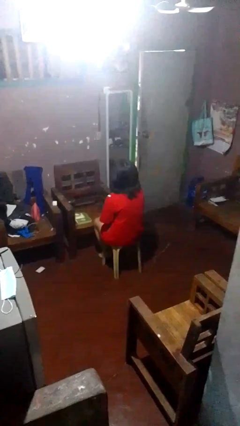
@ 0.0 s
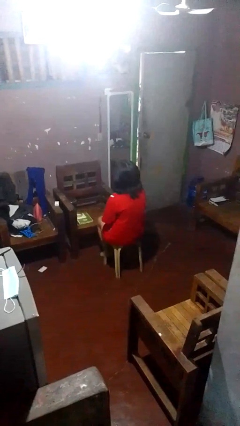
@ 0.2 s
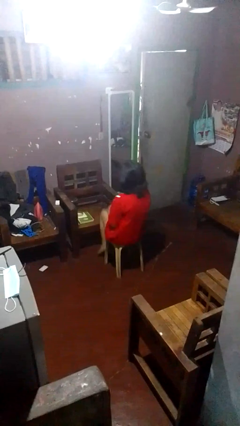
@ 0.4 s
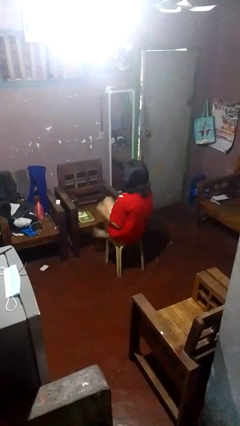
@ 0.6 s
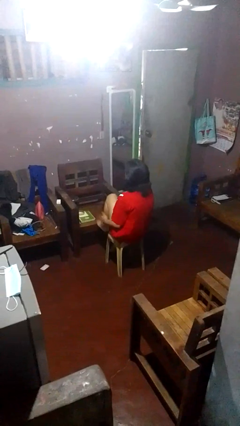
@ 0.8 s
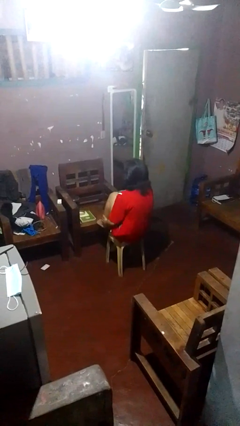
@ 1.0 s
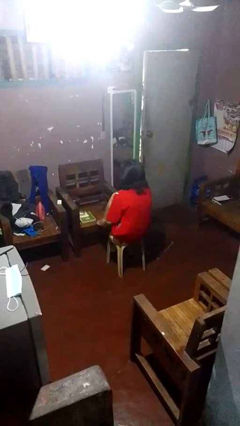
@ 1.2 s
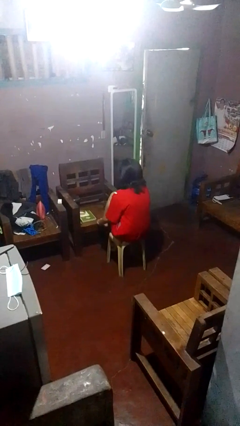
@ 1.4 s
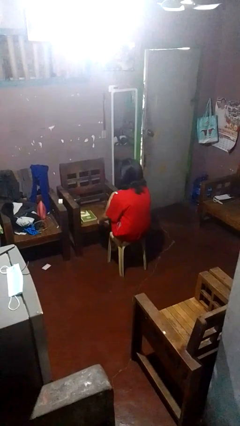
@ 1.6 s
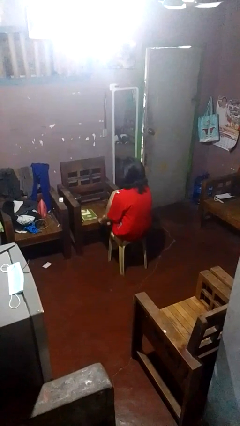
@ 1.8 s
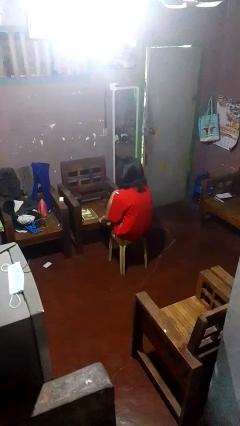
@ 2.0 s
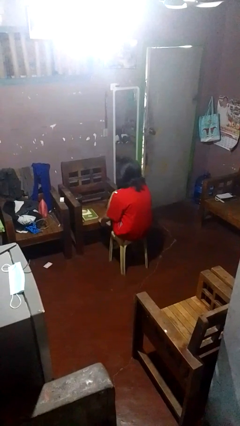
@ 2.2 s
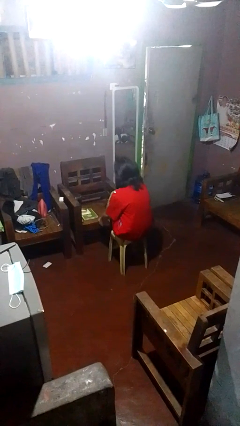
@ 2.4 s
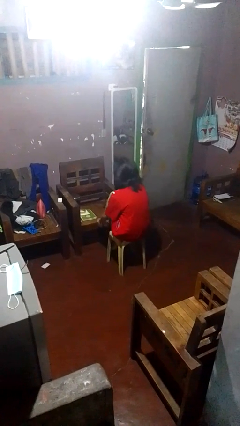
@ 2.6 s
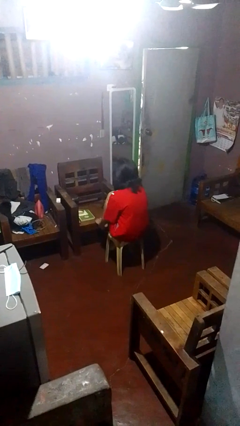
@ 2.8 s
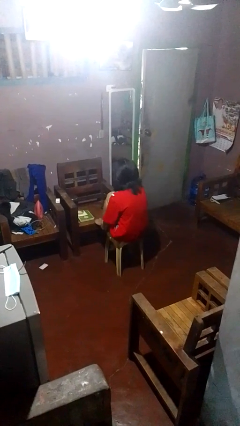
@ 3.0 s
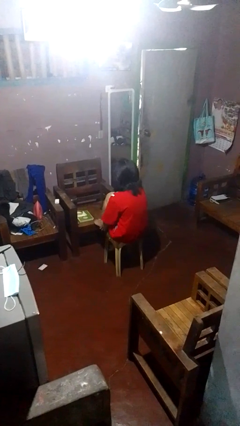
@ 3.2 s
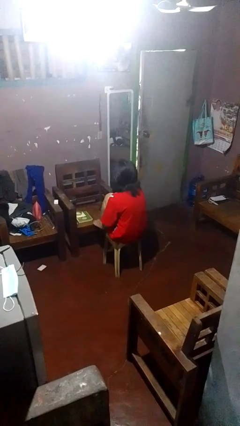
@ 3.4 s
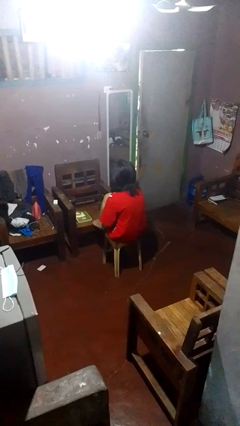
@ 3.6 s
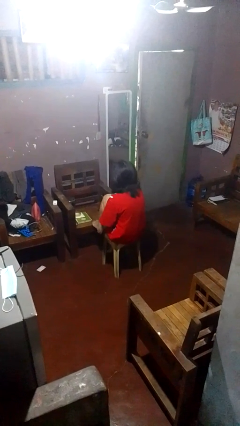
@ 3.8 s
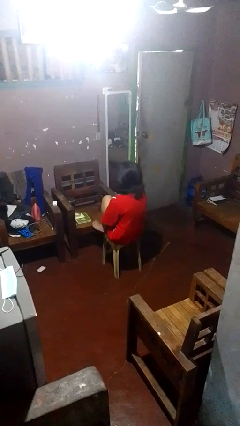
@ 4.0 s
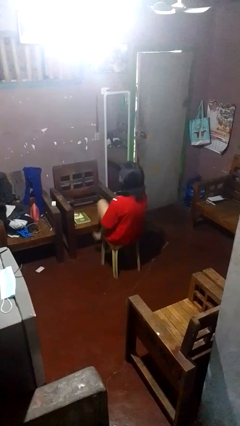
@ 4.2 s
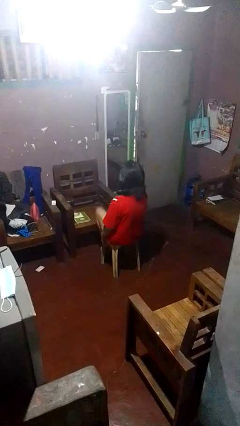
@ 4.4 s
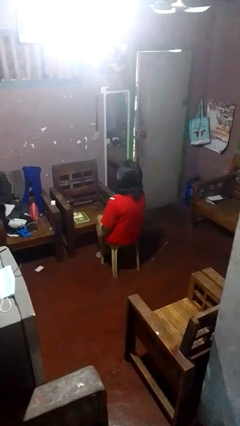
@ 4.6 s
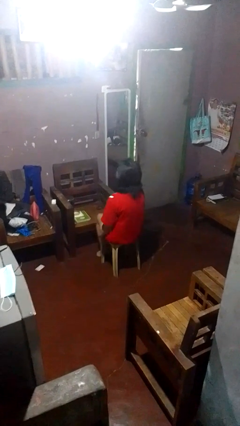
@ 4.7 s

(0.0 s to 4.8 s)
person rubs foot

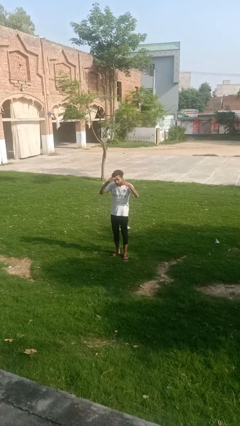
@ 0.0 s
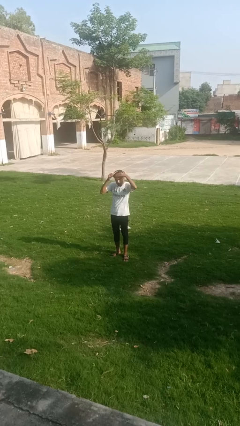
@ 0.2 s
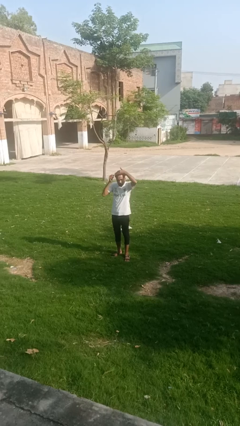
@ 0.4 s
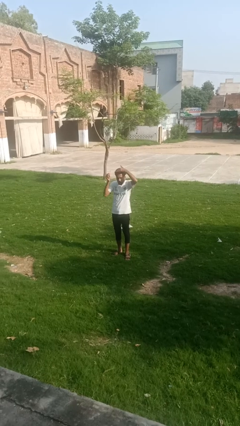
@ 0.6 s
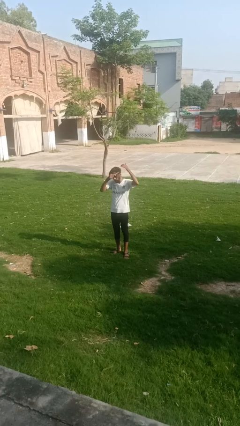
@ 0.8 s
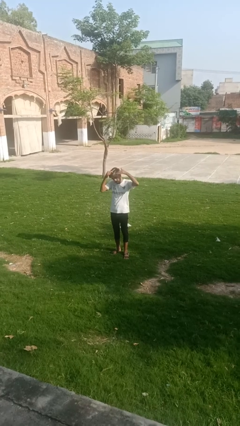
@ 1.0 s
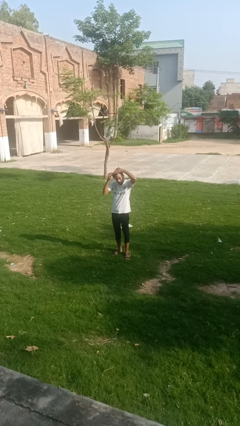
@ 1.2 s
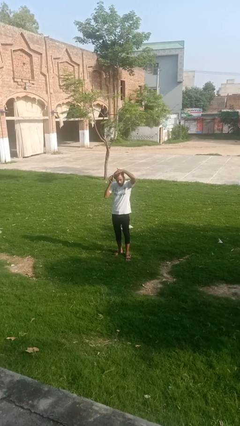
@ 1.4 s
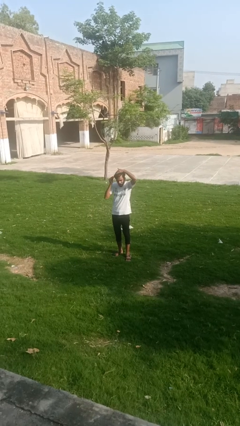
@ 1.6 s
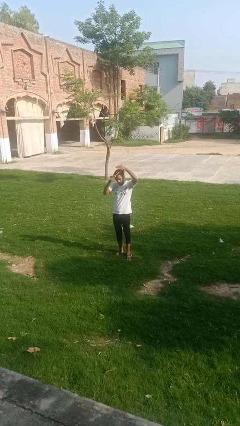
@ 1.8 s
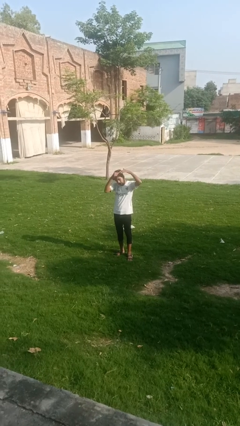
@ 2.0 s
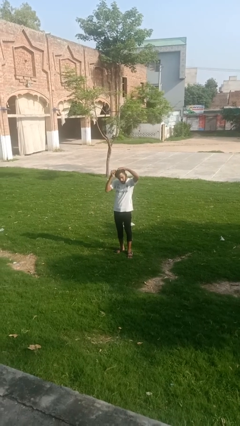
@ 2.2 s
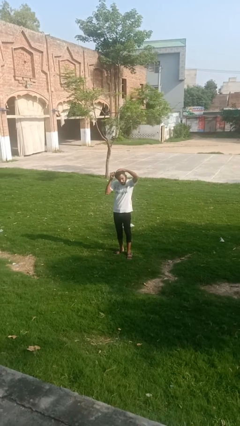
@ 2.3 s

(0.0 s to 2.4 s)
person brushes hair

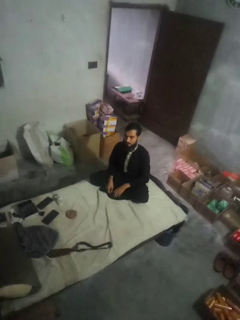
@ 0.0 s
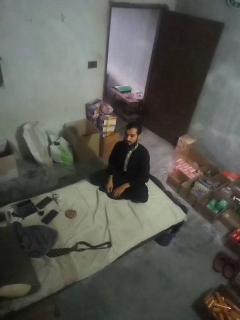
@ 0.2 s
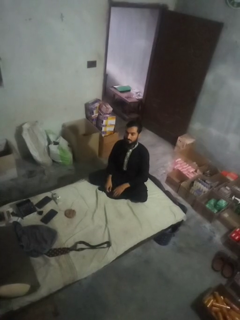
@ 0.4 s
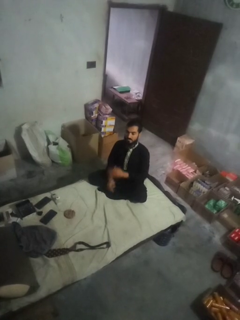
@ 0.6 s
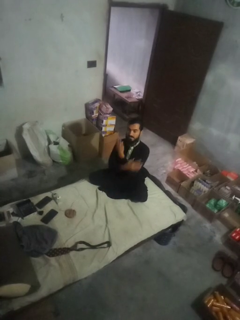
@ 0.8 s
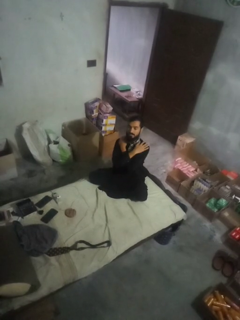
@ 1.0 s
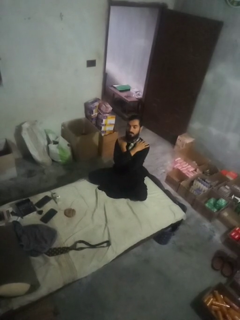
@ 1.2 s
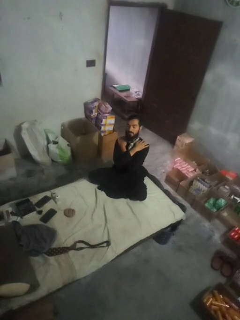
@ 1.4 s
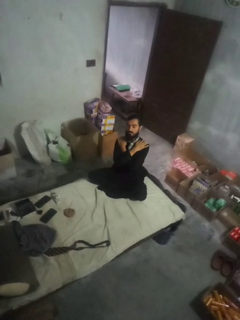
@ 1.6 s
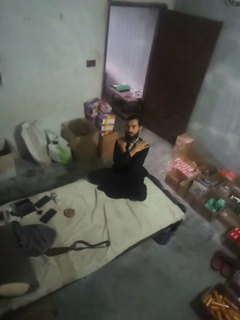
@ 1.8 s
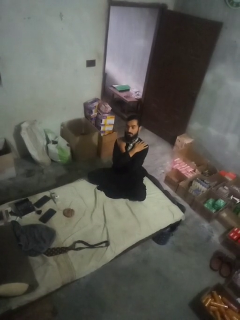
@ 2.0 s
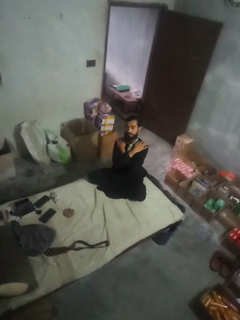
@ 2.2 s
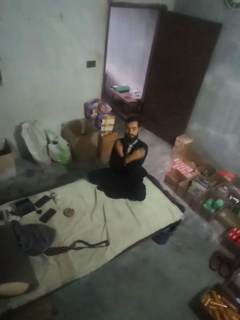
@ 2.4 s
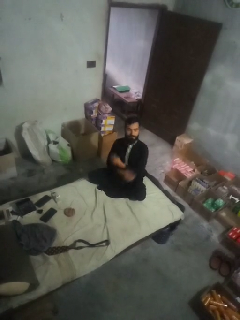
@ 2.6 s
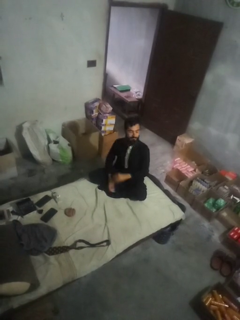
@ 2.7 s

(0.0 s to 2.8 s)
person gestures arms x

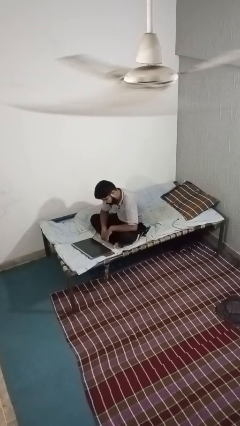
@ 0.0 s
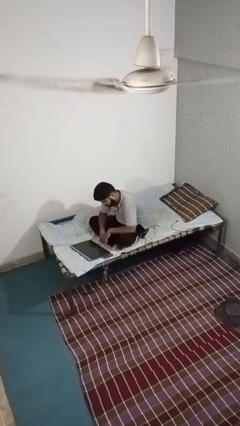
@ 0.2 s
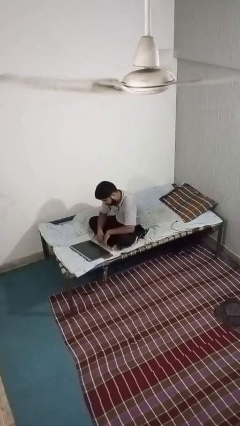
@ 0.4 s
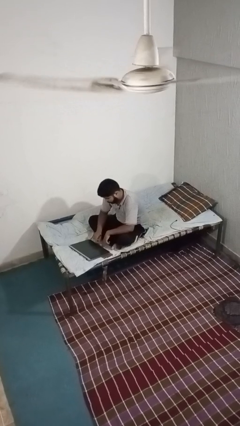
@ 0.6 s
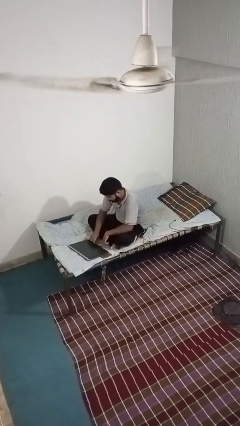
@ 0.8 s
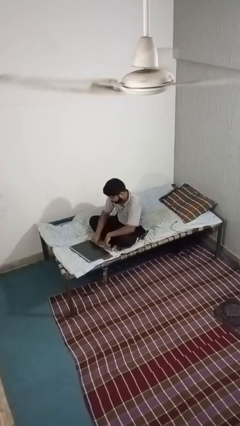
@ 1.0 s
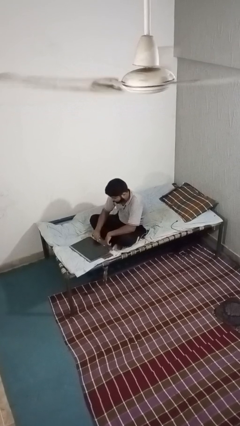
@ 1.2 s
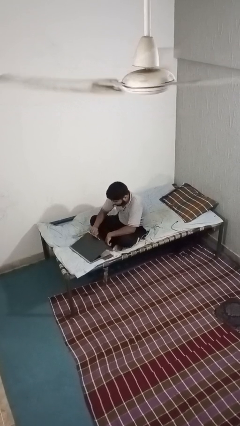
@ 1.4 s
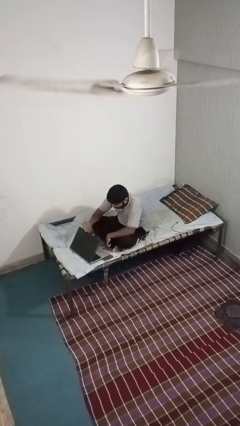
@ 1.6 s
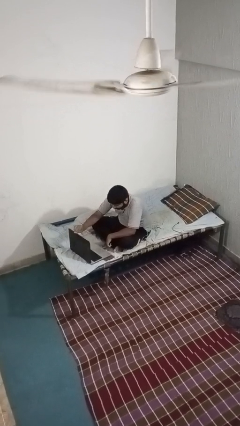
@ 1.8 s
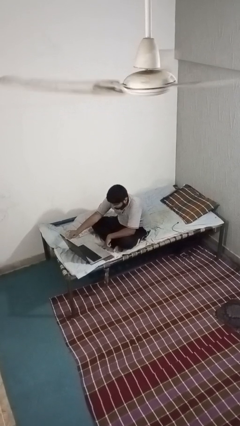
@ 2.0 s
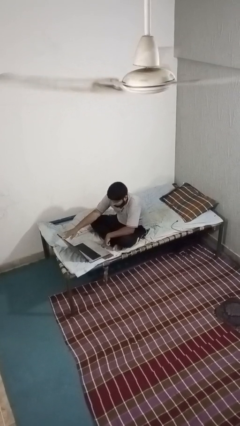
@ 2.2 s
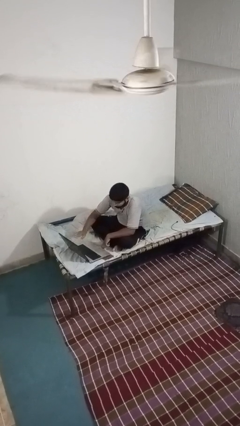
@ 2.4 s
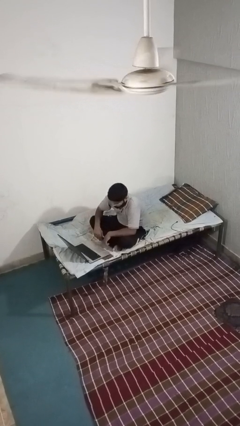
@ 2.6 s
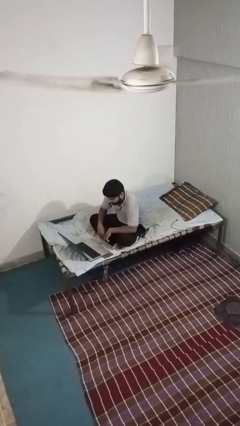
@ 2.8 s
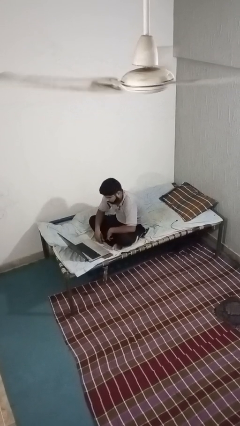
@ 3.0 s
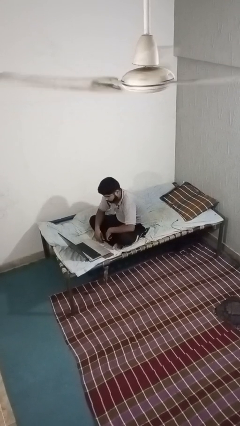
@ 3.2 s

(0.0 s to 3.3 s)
person opens laptop

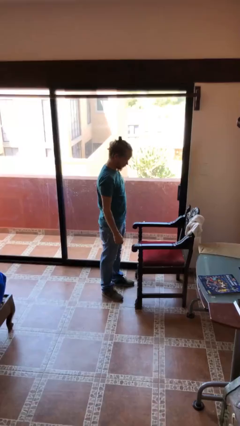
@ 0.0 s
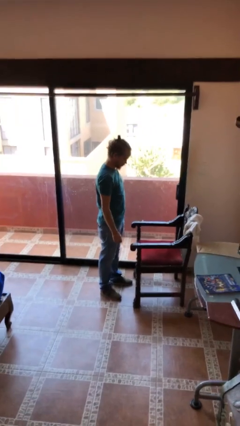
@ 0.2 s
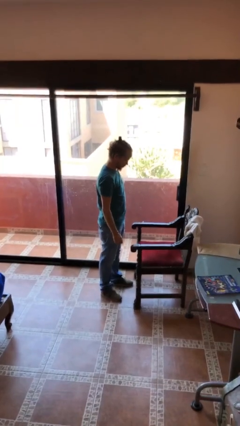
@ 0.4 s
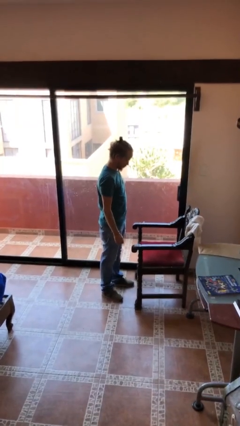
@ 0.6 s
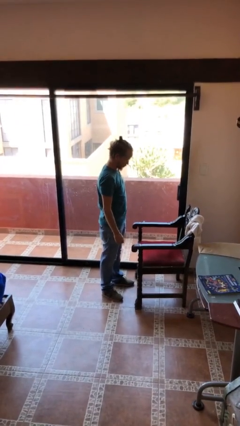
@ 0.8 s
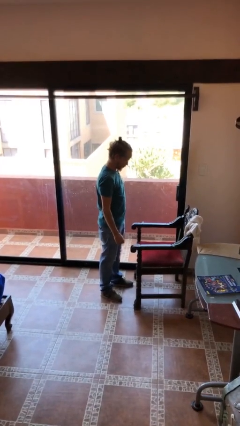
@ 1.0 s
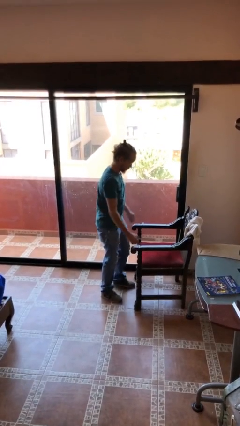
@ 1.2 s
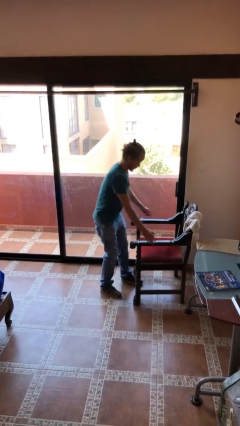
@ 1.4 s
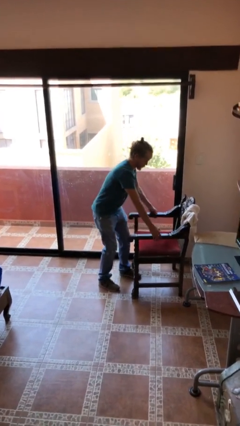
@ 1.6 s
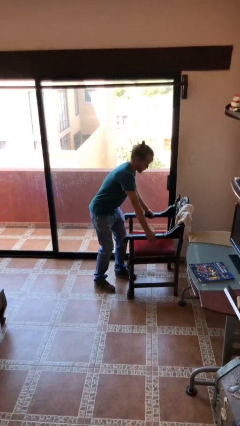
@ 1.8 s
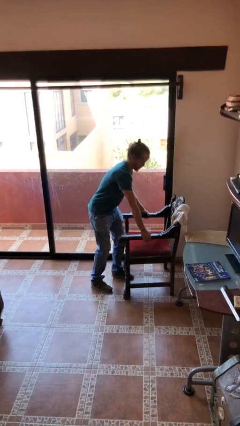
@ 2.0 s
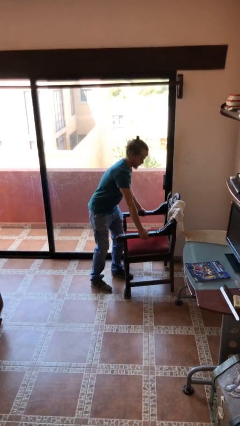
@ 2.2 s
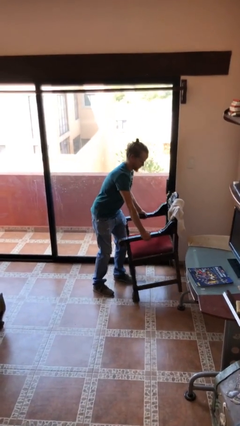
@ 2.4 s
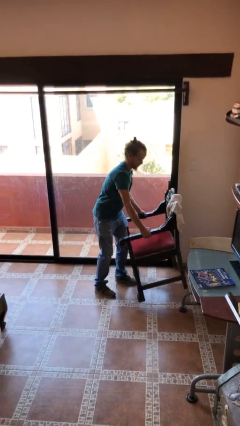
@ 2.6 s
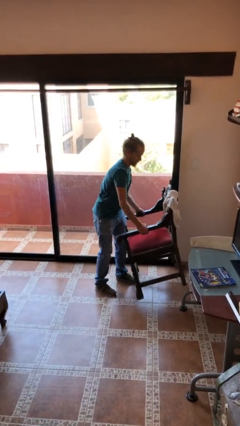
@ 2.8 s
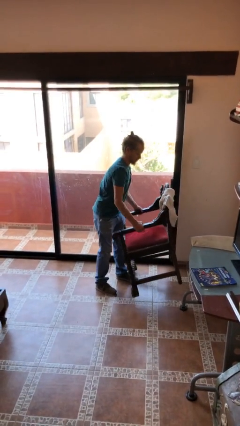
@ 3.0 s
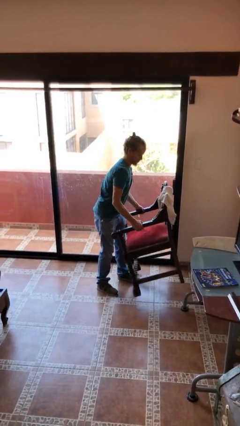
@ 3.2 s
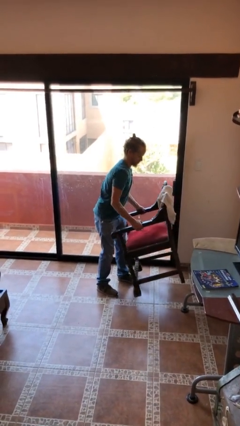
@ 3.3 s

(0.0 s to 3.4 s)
person picks up object from floor

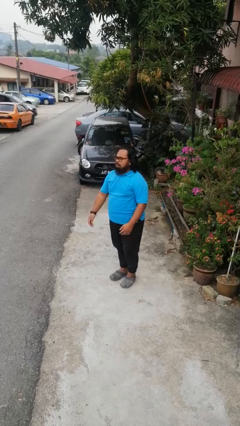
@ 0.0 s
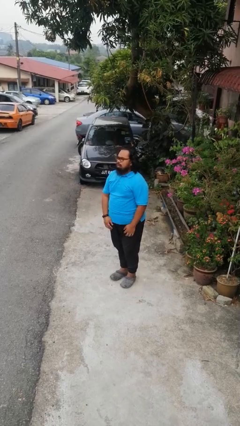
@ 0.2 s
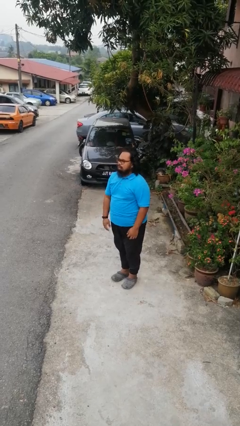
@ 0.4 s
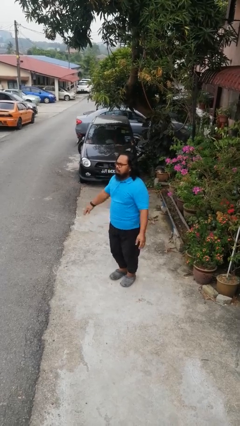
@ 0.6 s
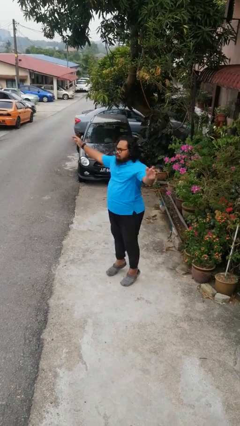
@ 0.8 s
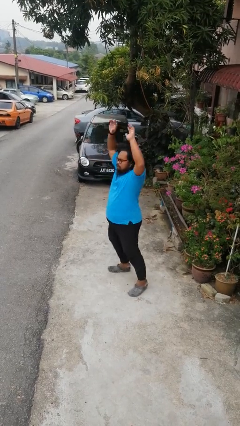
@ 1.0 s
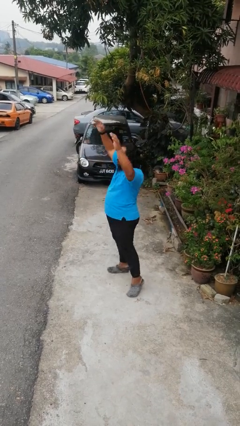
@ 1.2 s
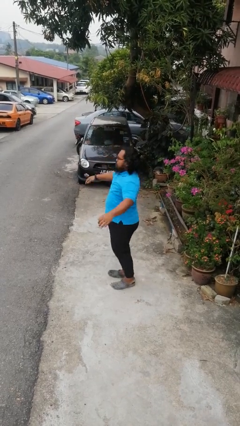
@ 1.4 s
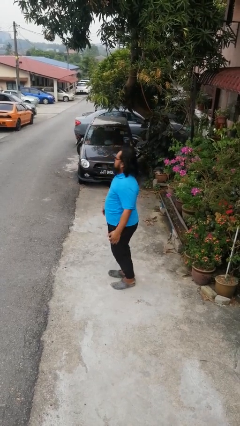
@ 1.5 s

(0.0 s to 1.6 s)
person exercises with jumping jacks
